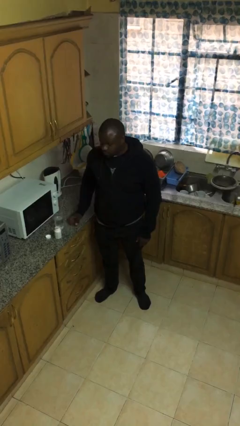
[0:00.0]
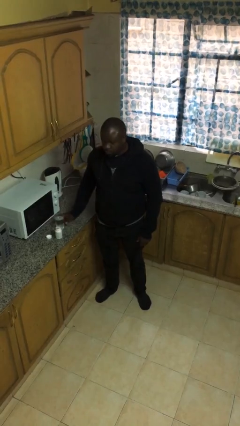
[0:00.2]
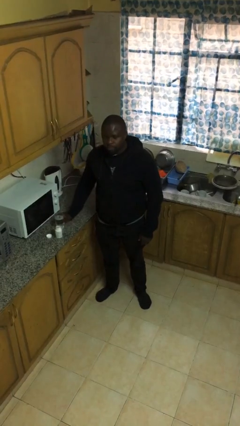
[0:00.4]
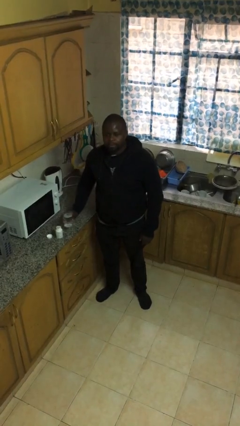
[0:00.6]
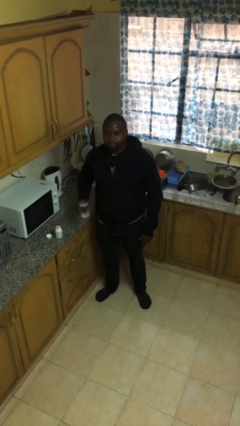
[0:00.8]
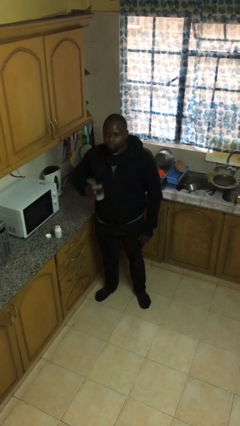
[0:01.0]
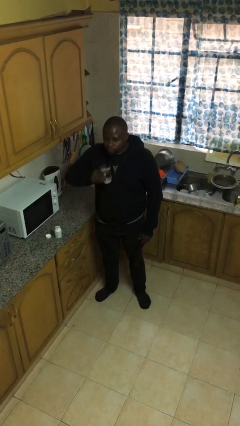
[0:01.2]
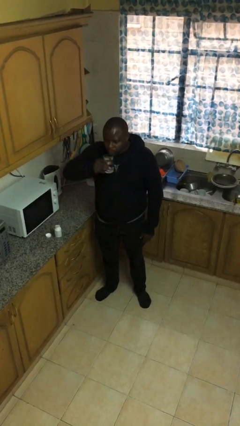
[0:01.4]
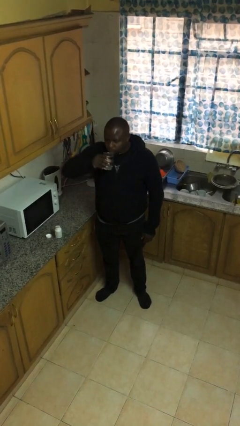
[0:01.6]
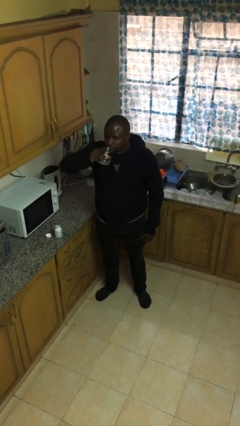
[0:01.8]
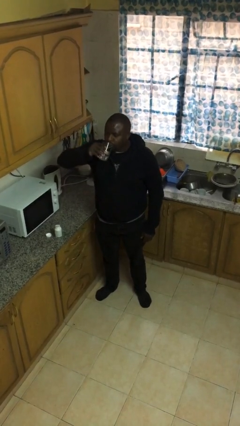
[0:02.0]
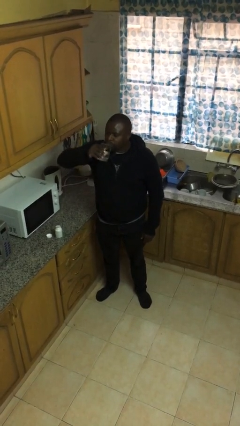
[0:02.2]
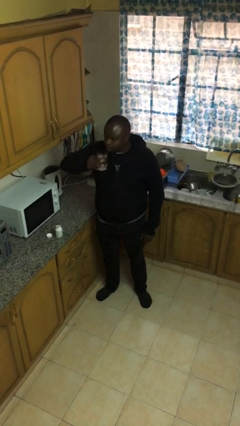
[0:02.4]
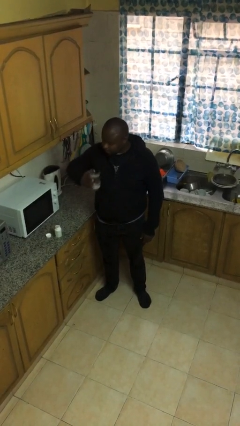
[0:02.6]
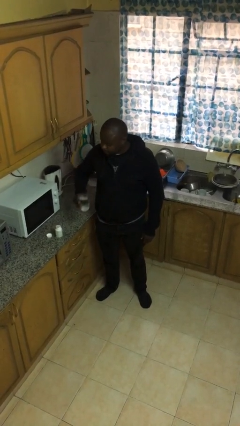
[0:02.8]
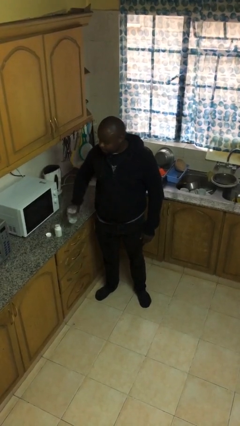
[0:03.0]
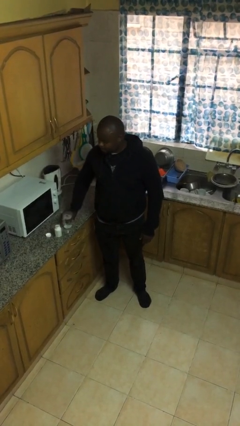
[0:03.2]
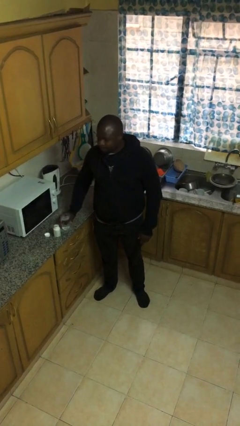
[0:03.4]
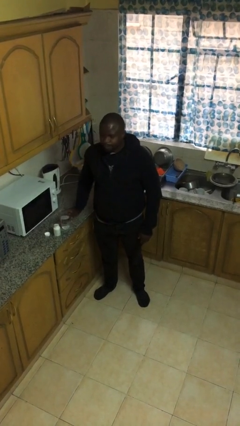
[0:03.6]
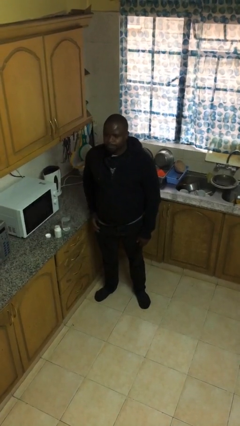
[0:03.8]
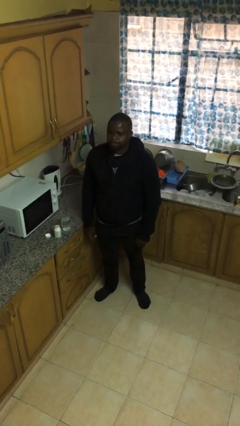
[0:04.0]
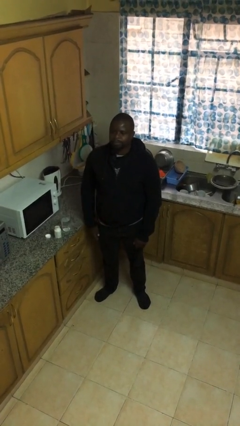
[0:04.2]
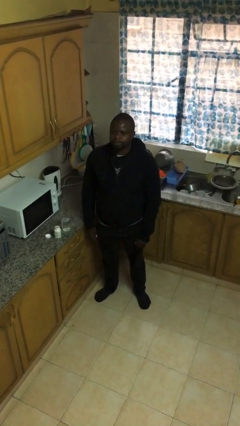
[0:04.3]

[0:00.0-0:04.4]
person drinks from cup

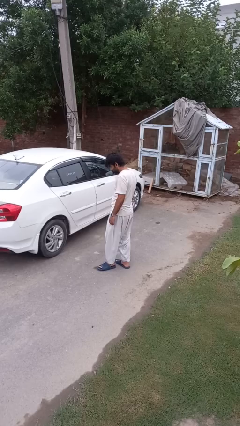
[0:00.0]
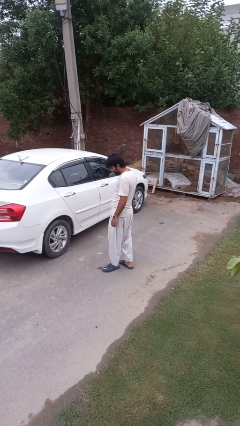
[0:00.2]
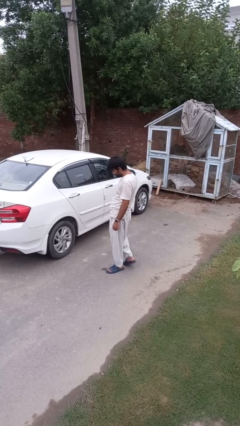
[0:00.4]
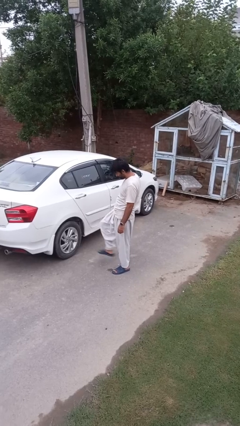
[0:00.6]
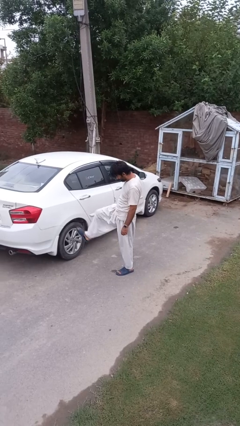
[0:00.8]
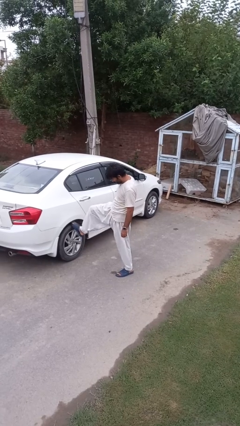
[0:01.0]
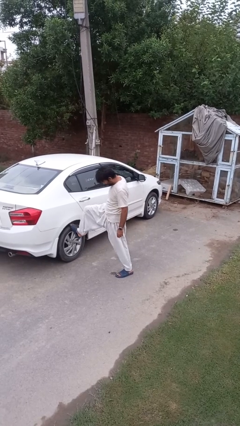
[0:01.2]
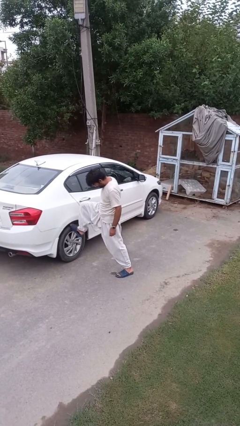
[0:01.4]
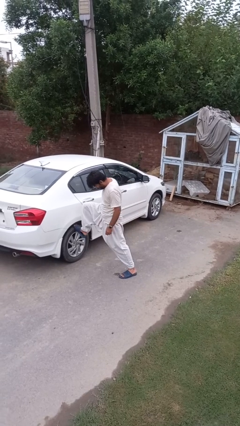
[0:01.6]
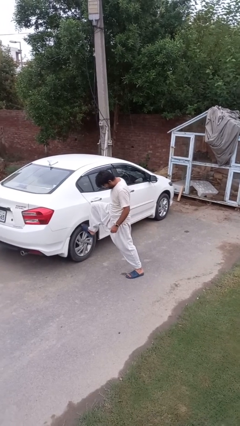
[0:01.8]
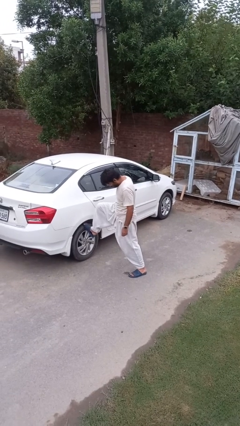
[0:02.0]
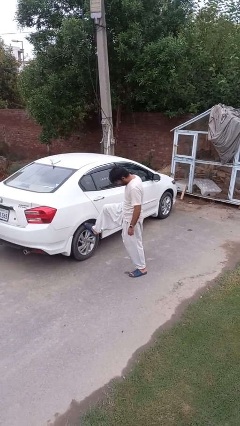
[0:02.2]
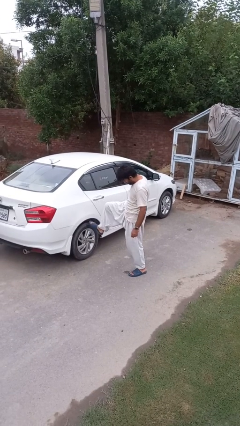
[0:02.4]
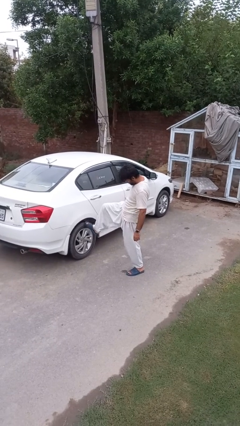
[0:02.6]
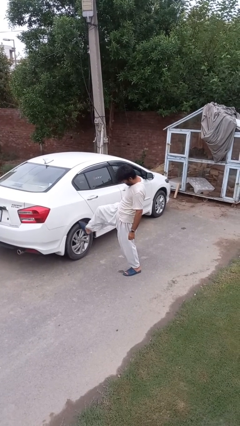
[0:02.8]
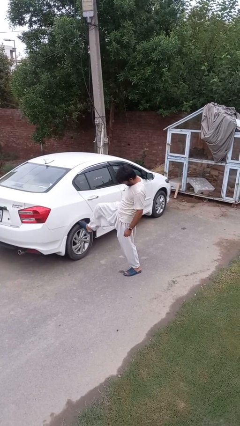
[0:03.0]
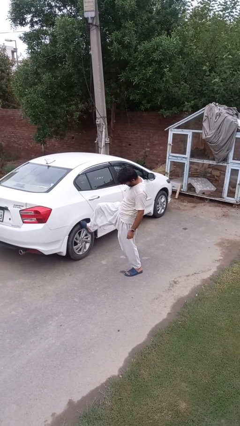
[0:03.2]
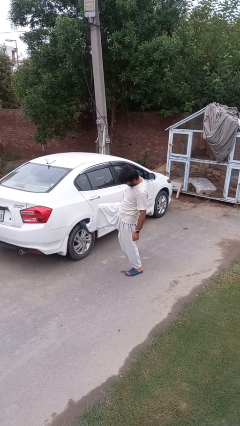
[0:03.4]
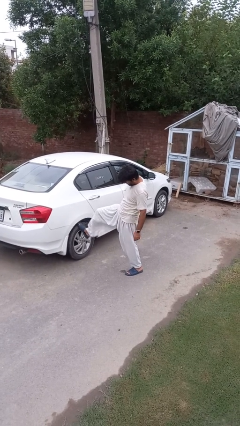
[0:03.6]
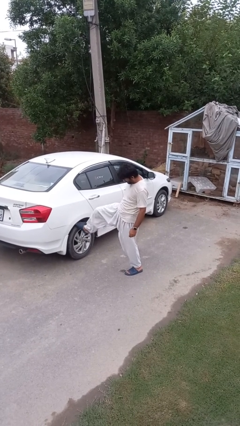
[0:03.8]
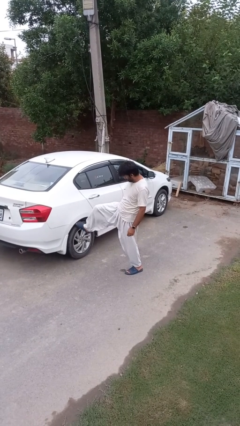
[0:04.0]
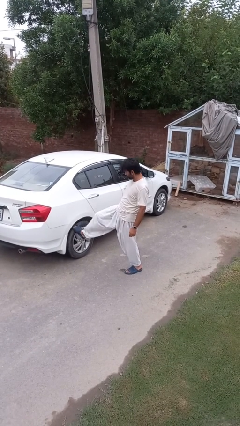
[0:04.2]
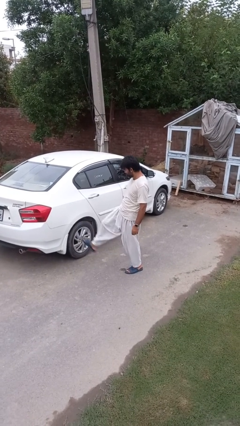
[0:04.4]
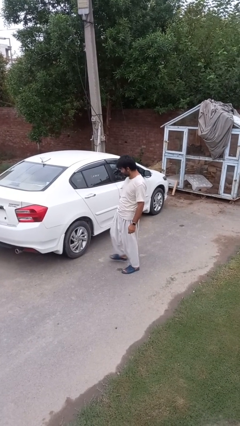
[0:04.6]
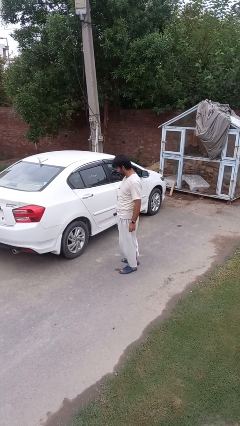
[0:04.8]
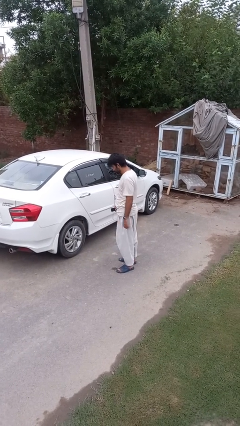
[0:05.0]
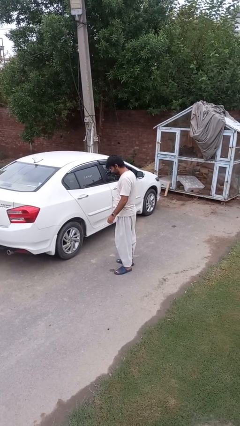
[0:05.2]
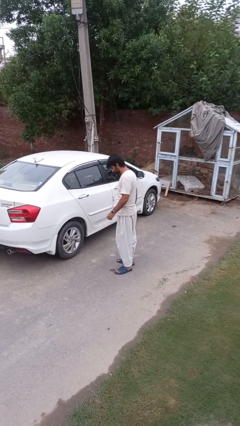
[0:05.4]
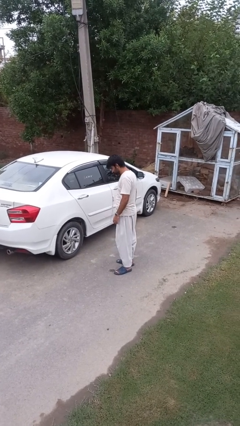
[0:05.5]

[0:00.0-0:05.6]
person kicks car tires

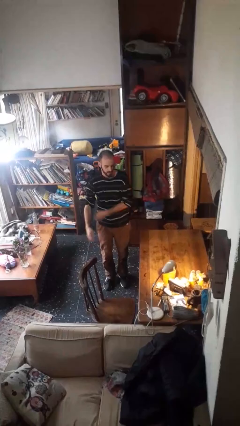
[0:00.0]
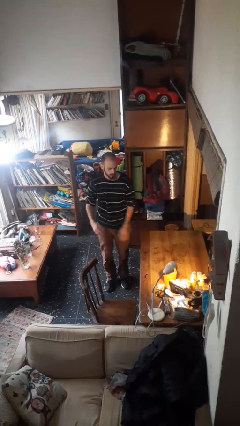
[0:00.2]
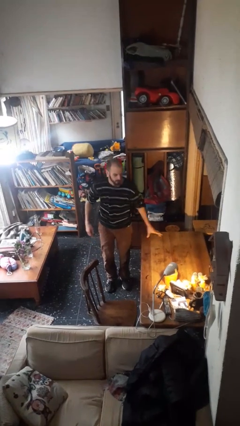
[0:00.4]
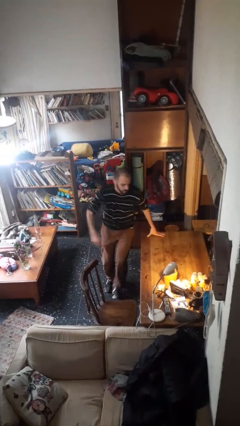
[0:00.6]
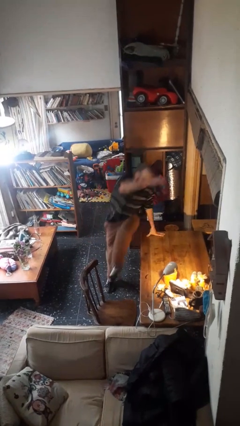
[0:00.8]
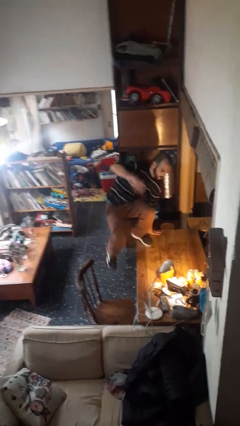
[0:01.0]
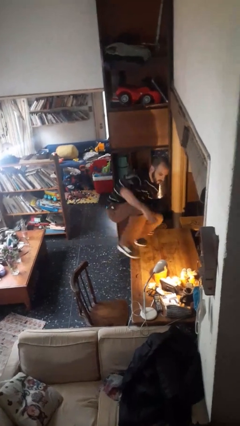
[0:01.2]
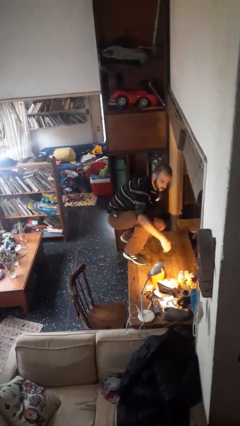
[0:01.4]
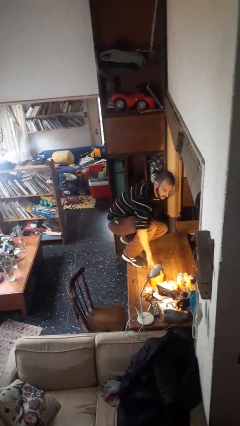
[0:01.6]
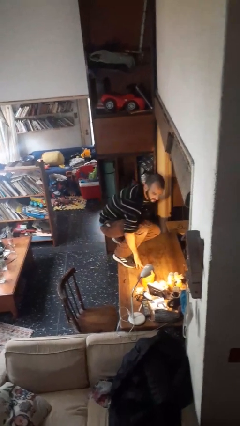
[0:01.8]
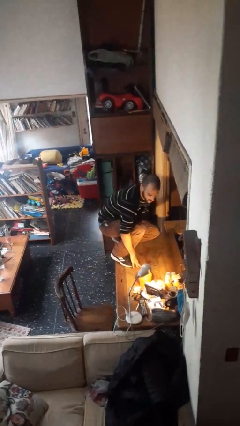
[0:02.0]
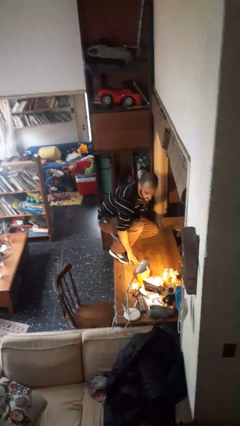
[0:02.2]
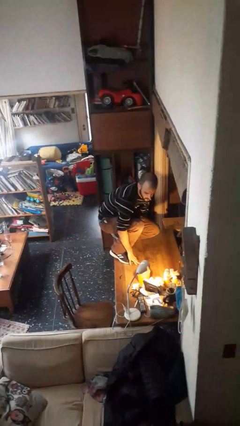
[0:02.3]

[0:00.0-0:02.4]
person climbs on table

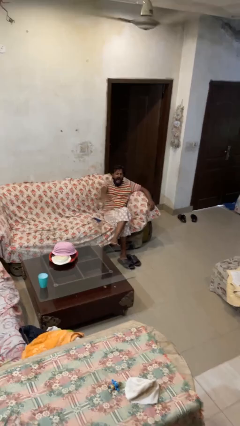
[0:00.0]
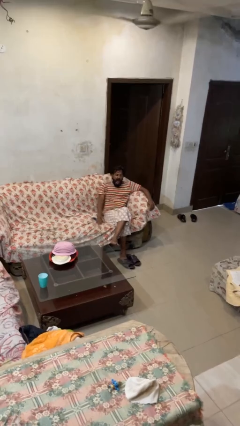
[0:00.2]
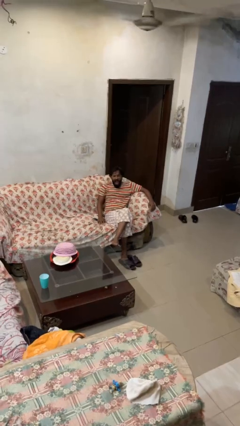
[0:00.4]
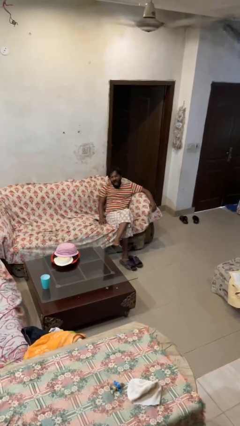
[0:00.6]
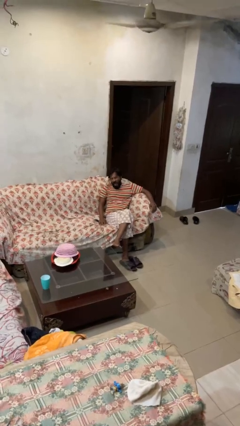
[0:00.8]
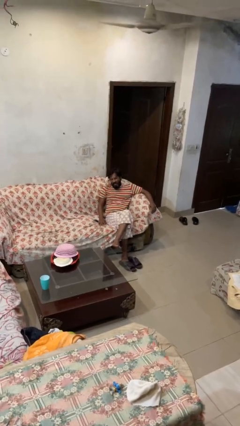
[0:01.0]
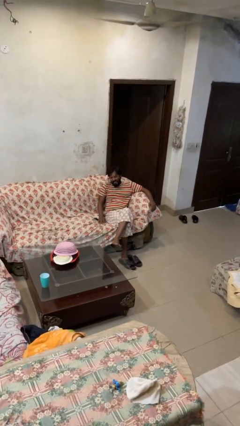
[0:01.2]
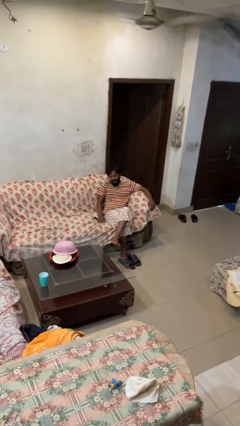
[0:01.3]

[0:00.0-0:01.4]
person gestures lower hand

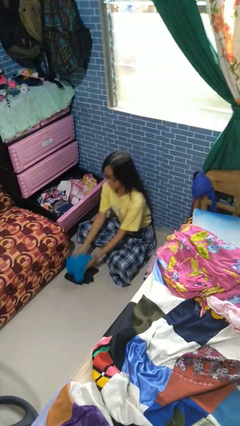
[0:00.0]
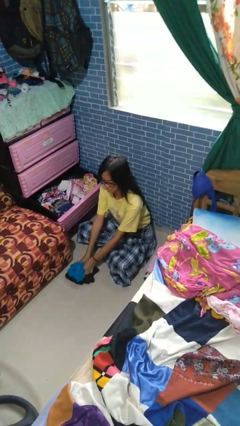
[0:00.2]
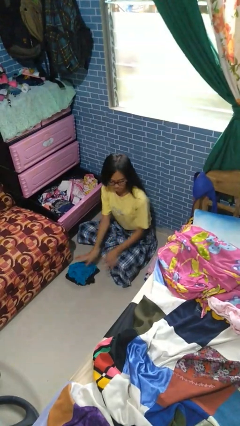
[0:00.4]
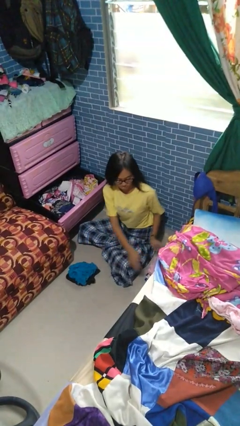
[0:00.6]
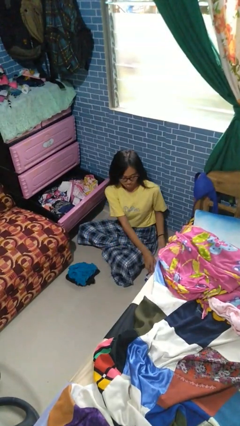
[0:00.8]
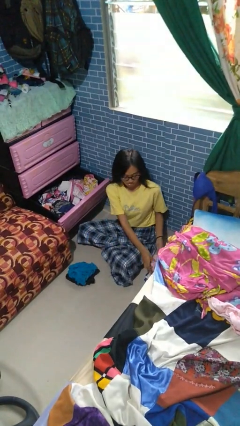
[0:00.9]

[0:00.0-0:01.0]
person takes clothes from dresser

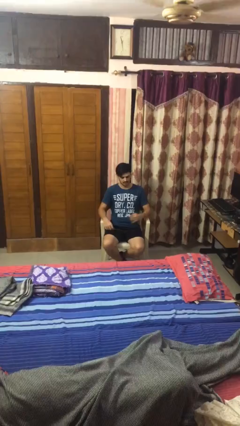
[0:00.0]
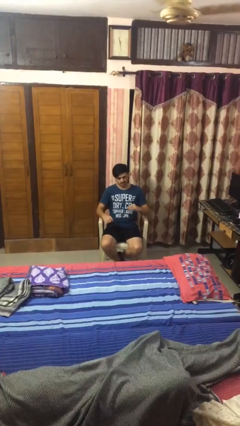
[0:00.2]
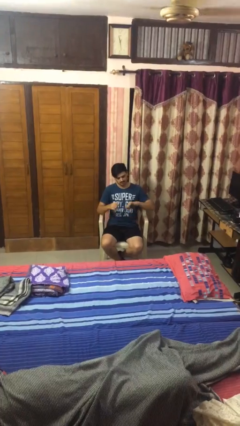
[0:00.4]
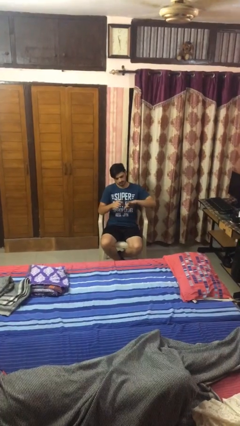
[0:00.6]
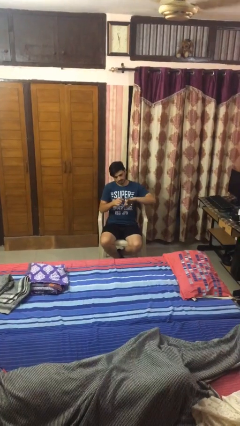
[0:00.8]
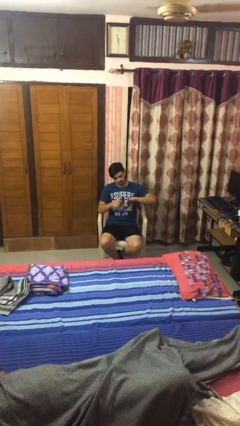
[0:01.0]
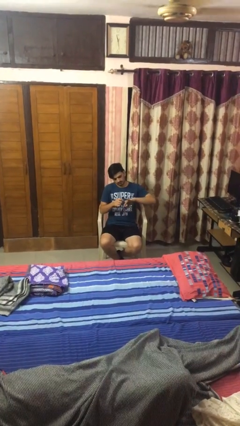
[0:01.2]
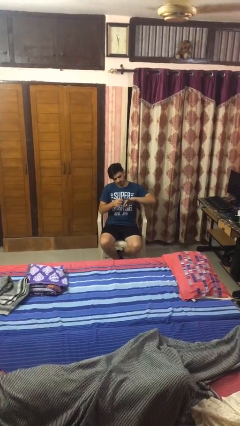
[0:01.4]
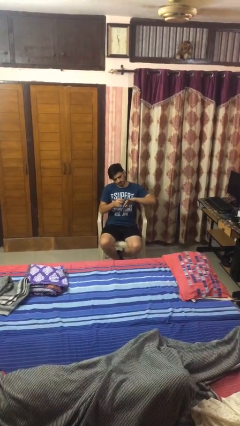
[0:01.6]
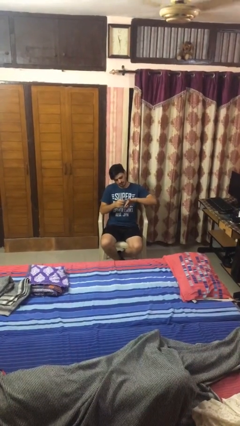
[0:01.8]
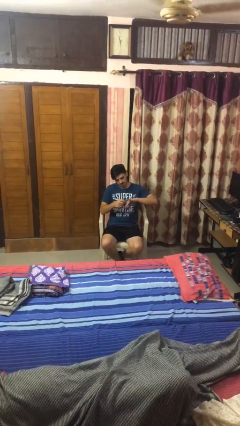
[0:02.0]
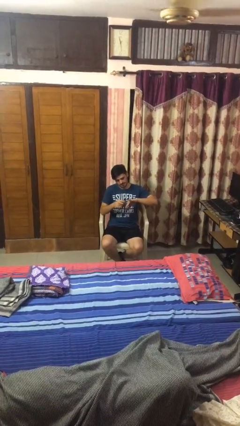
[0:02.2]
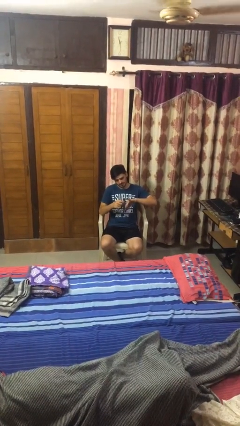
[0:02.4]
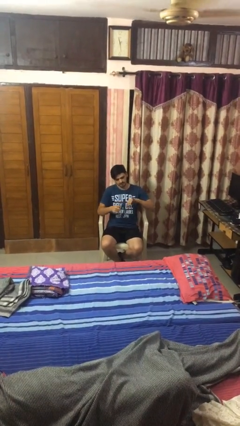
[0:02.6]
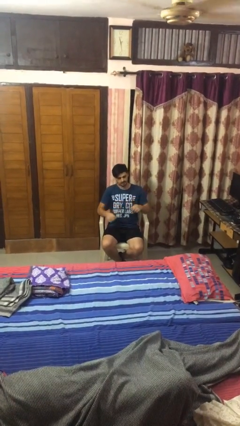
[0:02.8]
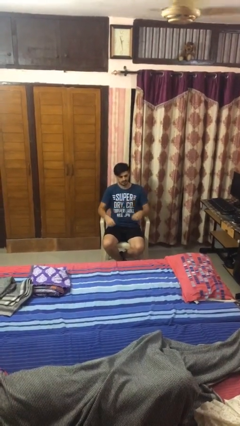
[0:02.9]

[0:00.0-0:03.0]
person files fingernails
